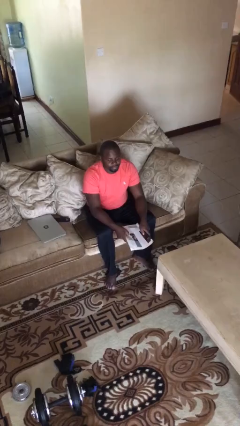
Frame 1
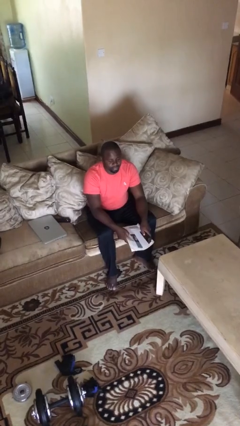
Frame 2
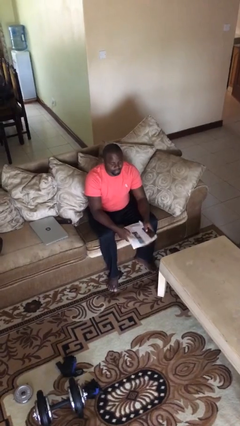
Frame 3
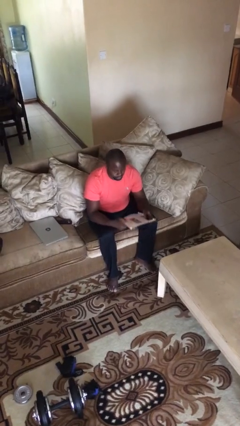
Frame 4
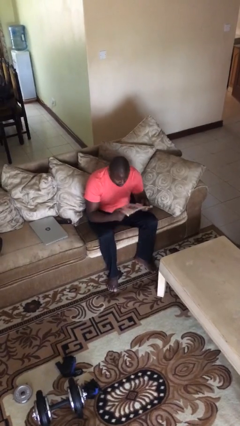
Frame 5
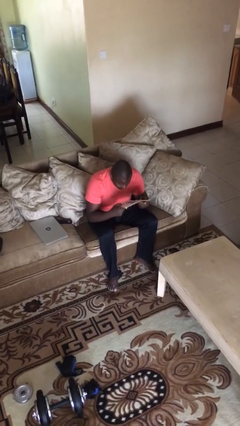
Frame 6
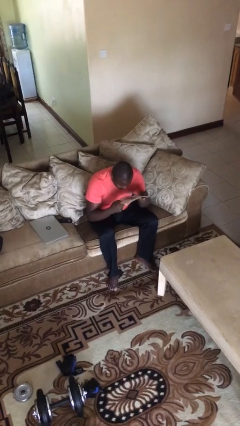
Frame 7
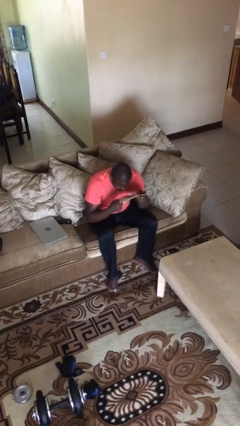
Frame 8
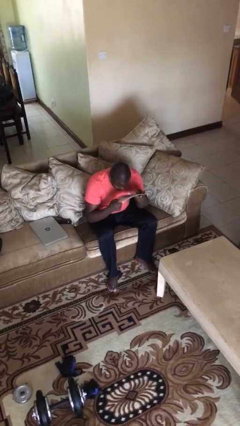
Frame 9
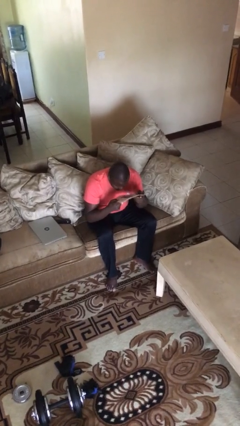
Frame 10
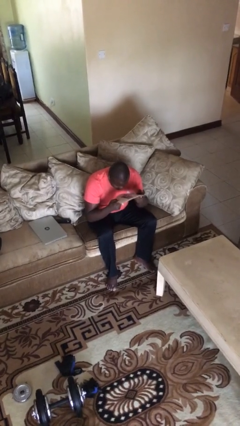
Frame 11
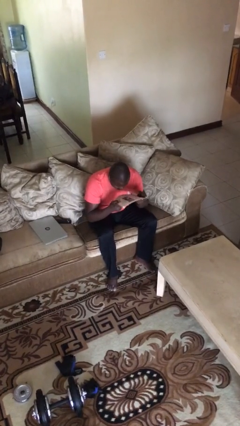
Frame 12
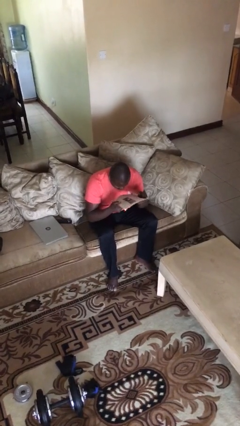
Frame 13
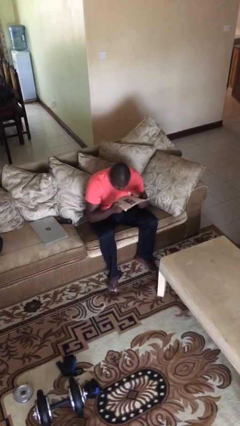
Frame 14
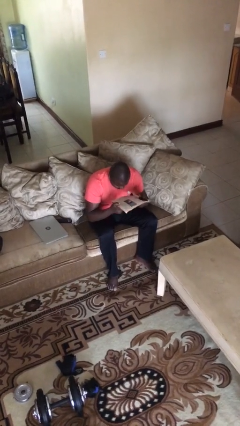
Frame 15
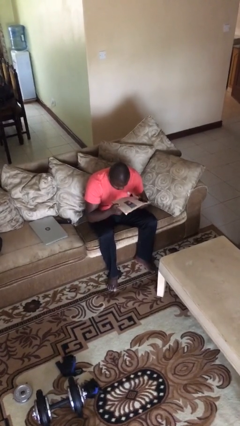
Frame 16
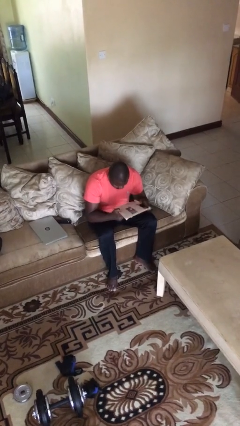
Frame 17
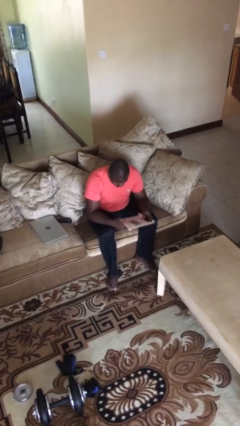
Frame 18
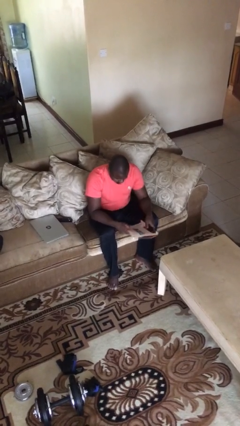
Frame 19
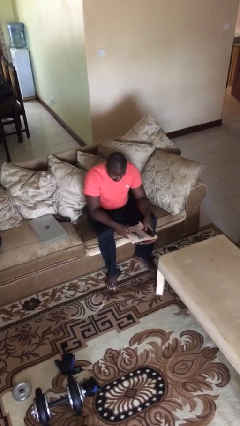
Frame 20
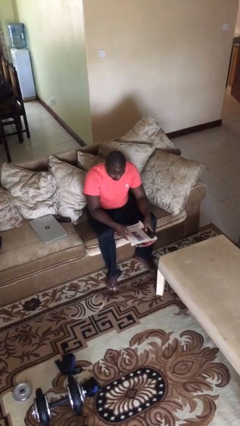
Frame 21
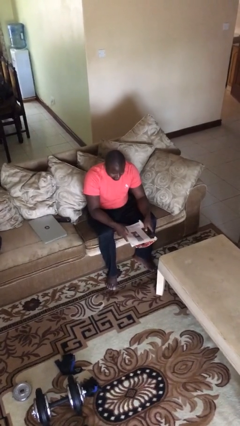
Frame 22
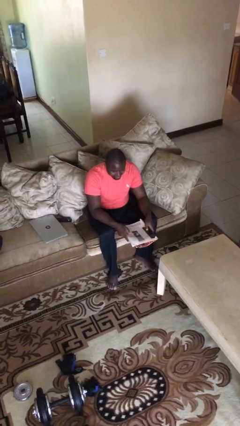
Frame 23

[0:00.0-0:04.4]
person reads document

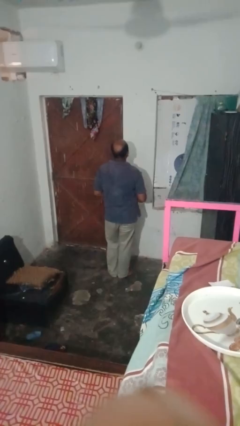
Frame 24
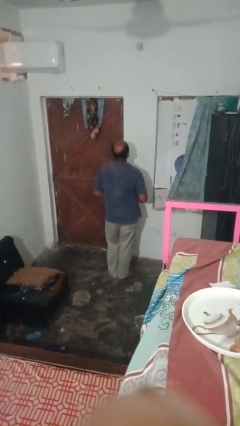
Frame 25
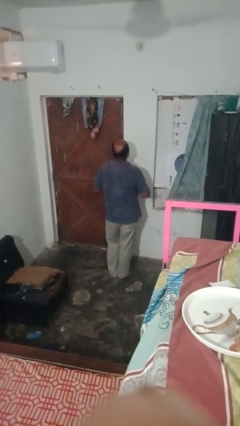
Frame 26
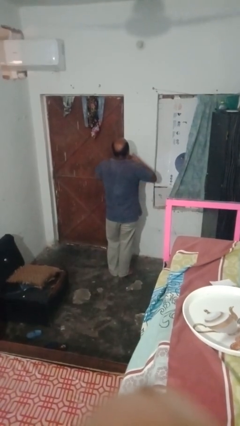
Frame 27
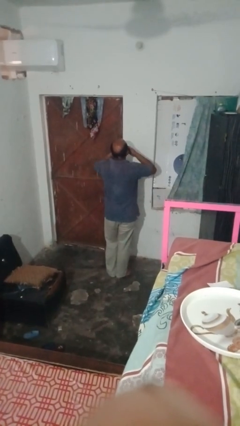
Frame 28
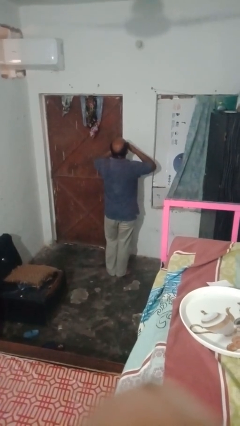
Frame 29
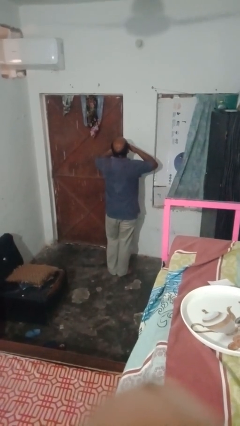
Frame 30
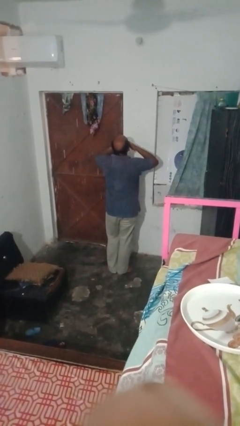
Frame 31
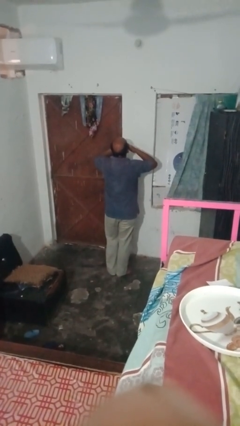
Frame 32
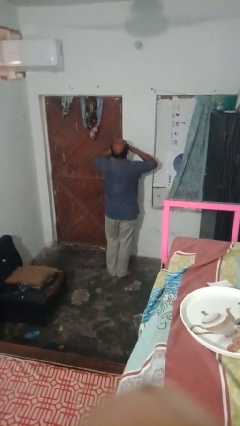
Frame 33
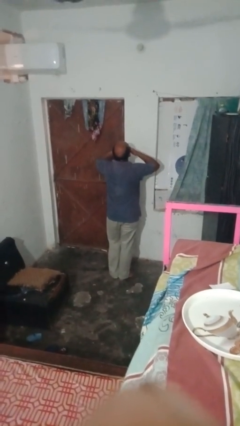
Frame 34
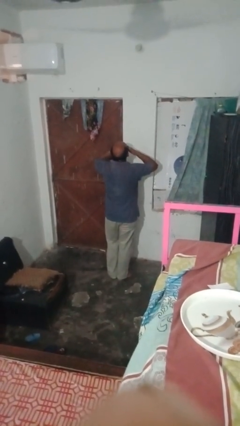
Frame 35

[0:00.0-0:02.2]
person yawns

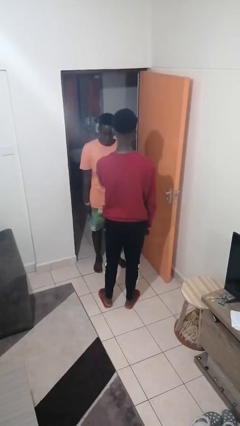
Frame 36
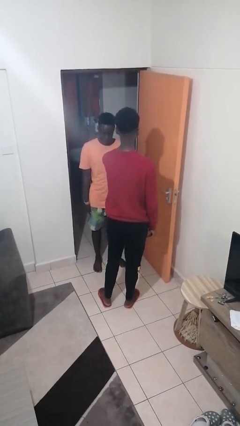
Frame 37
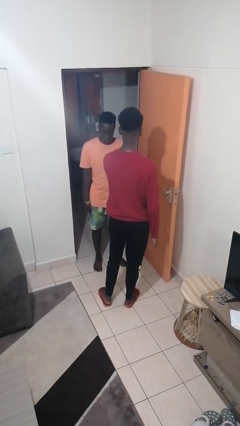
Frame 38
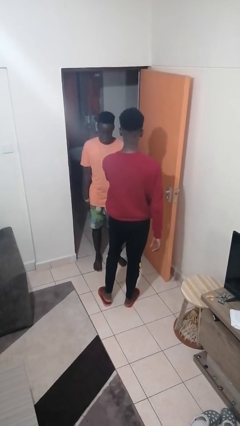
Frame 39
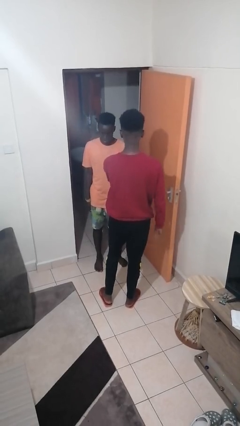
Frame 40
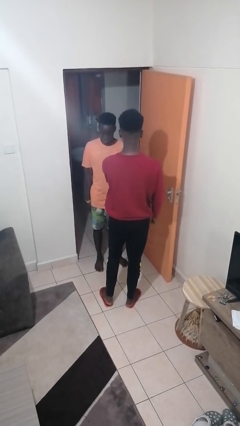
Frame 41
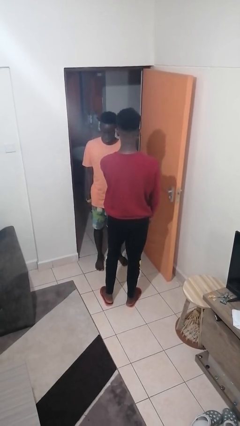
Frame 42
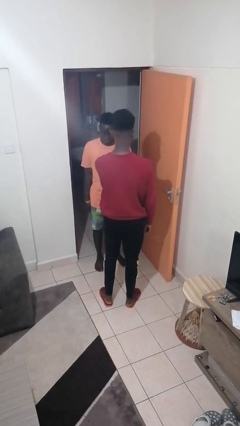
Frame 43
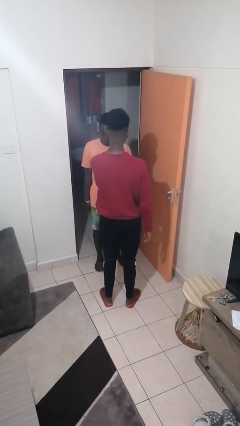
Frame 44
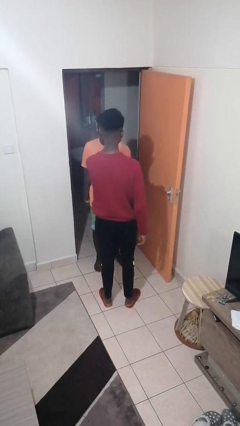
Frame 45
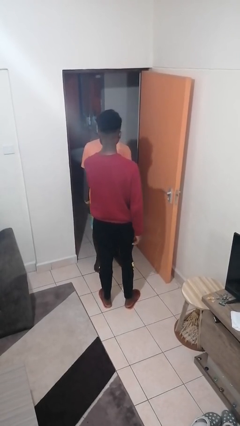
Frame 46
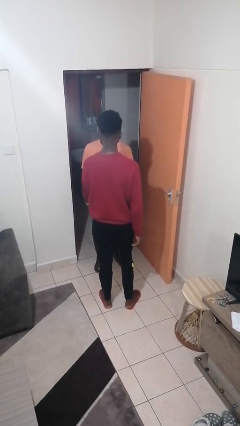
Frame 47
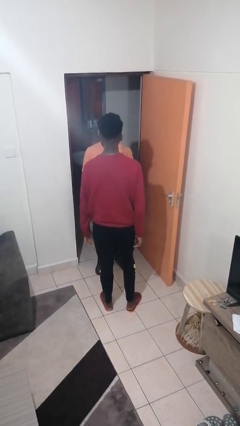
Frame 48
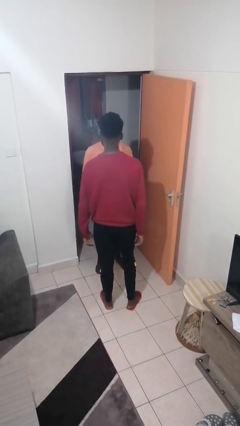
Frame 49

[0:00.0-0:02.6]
person grabs person by bicep

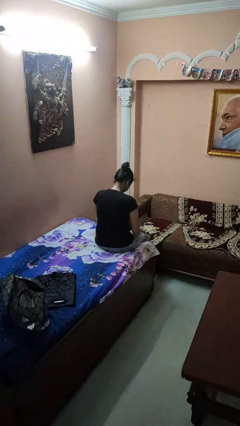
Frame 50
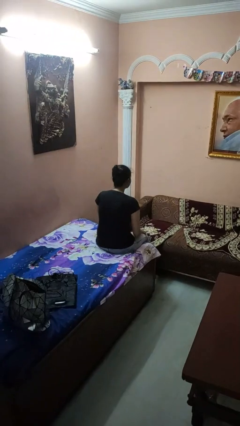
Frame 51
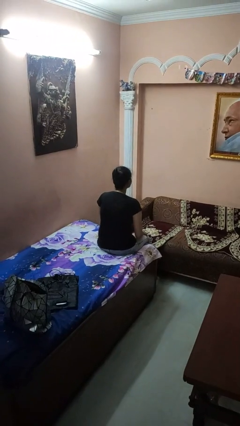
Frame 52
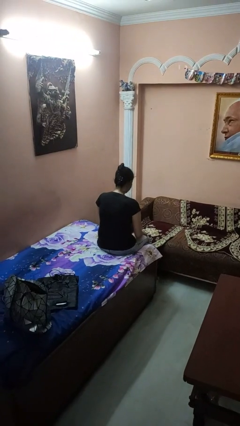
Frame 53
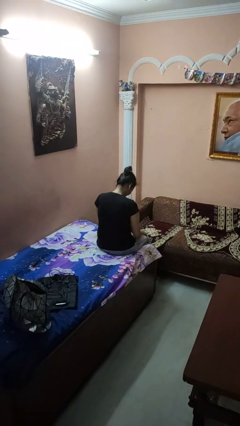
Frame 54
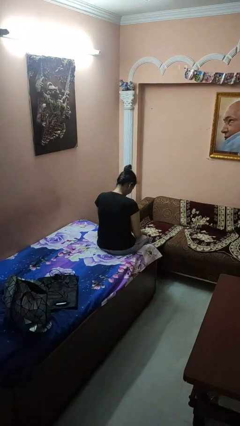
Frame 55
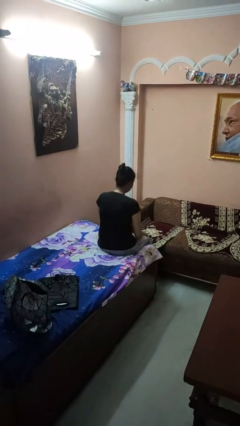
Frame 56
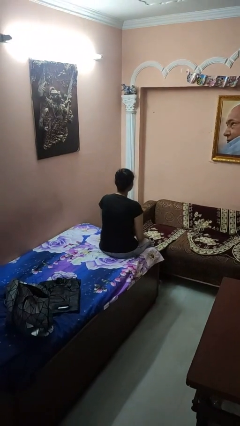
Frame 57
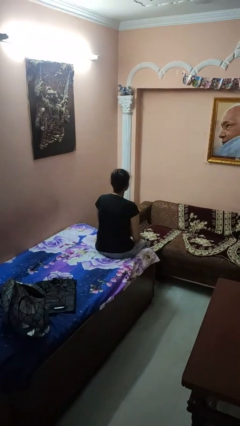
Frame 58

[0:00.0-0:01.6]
person nods head

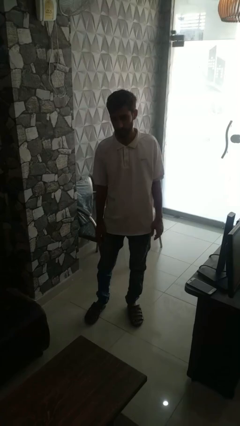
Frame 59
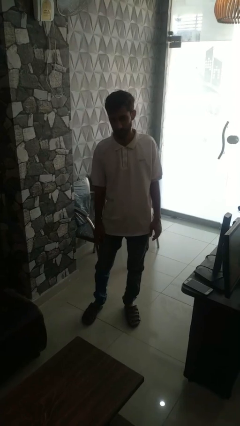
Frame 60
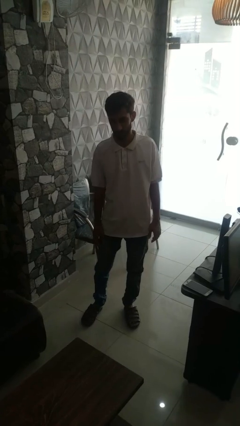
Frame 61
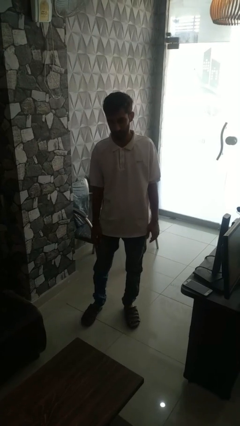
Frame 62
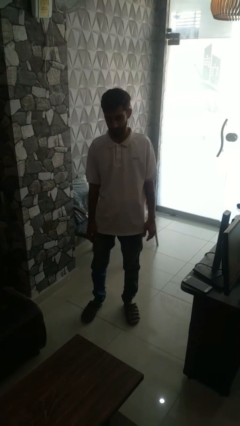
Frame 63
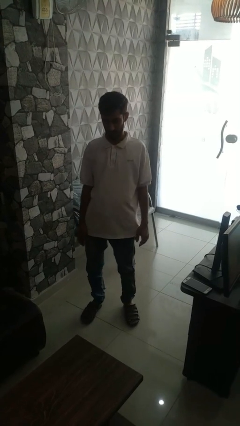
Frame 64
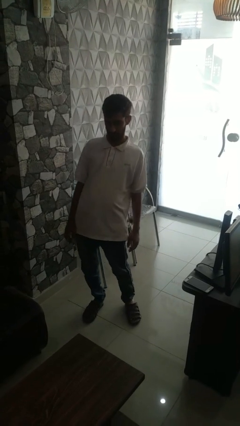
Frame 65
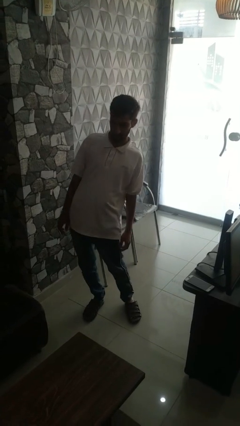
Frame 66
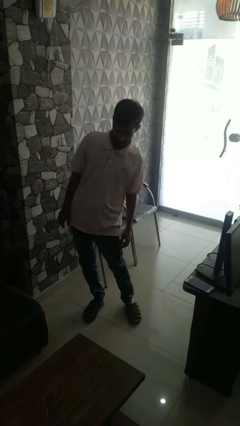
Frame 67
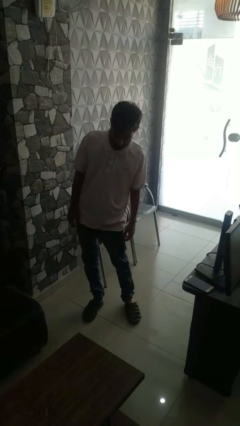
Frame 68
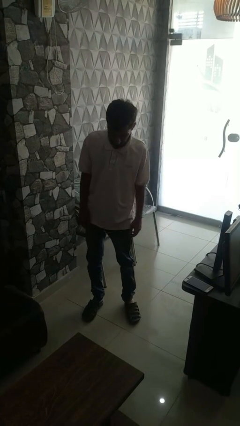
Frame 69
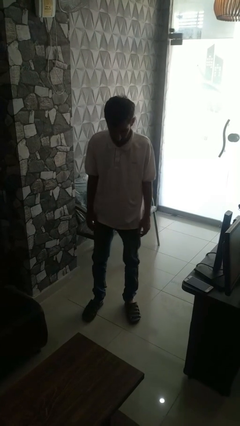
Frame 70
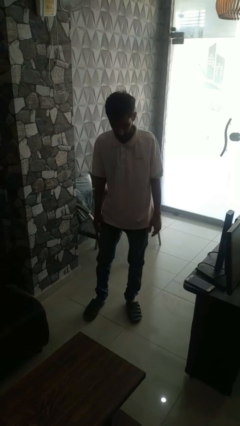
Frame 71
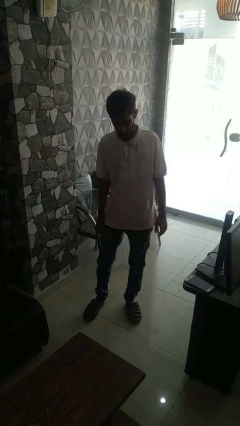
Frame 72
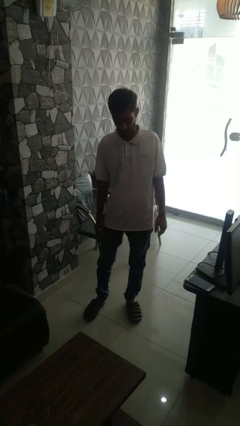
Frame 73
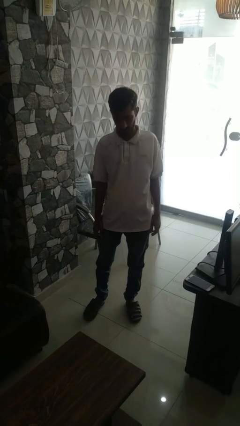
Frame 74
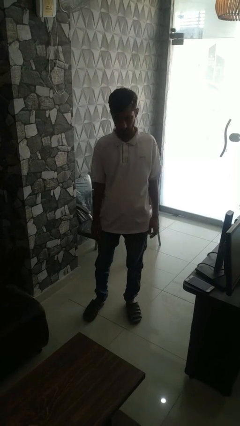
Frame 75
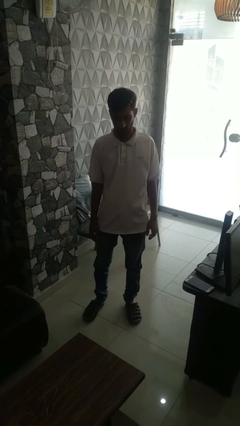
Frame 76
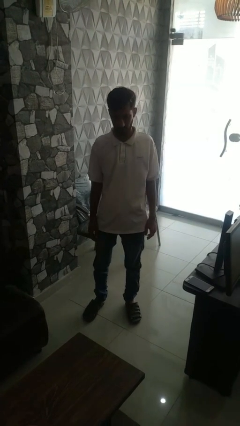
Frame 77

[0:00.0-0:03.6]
person wiggles hips

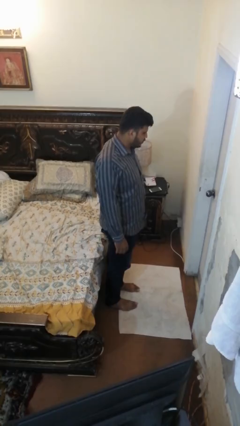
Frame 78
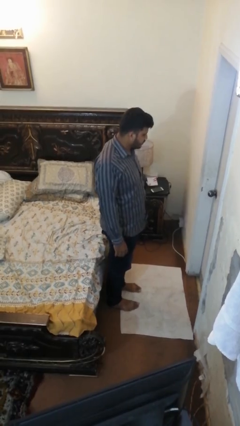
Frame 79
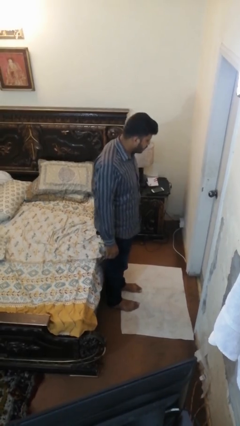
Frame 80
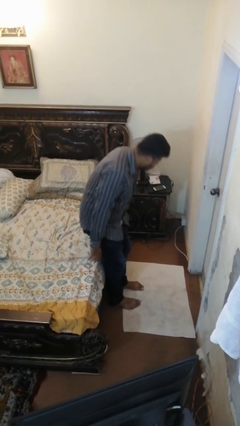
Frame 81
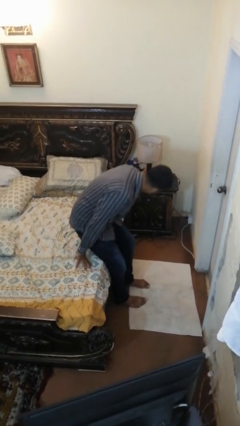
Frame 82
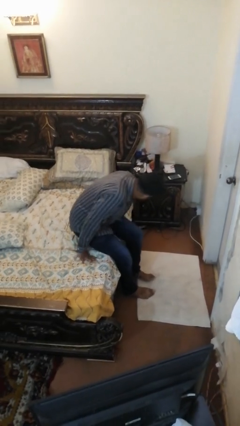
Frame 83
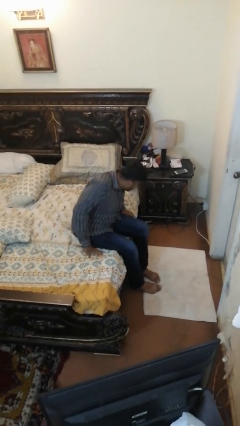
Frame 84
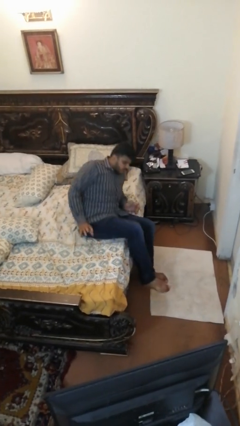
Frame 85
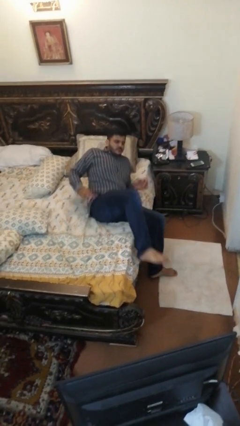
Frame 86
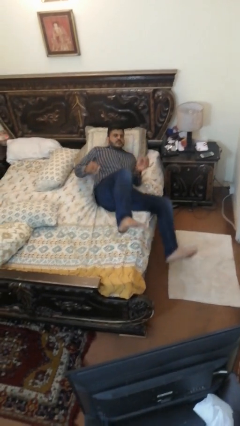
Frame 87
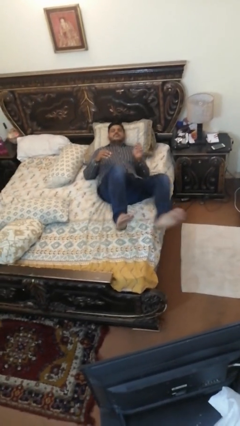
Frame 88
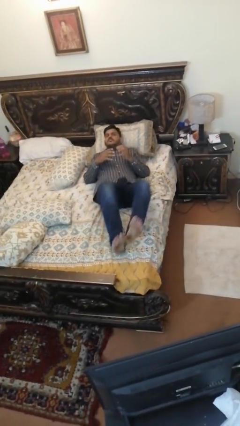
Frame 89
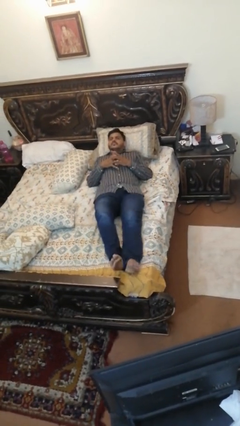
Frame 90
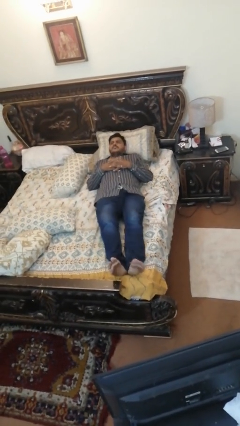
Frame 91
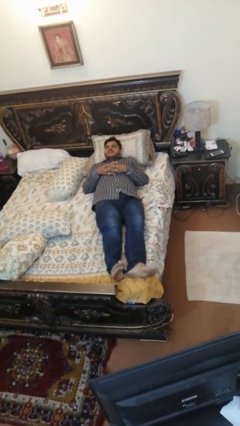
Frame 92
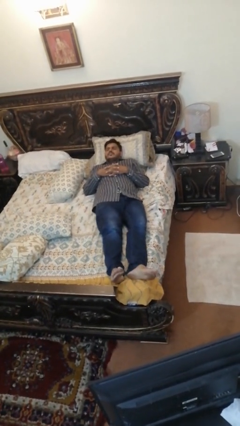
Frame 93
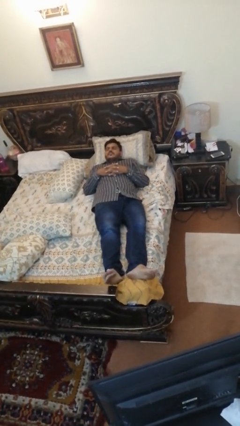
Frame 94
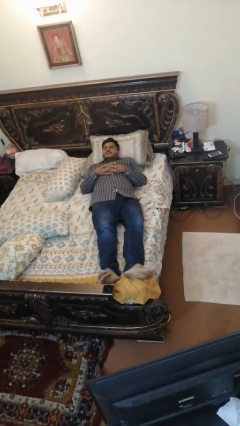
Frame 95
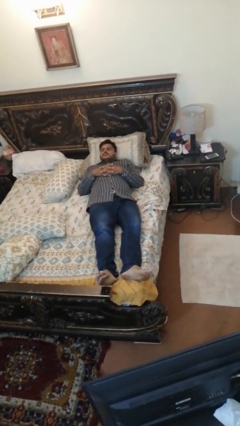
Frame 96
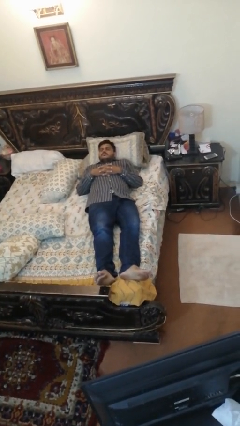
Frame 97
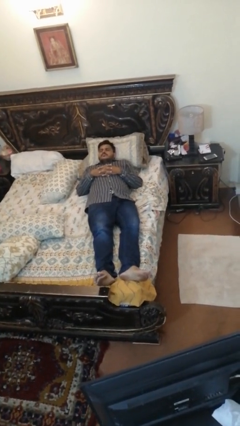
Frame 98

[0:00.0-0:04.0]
person lies down on bed
